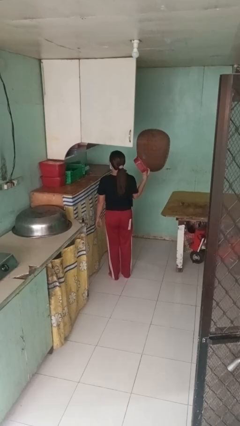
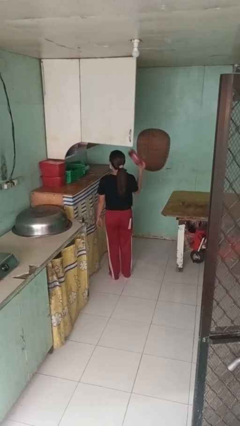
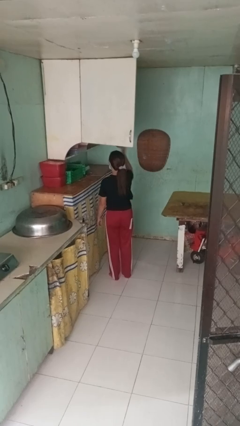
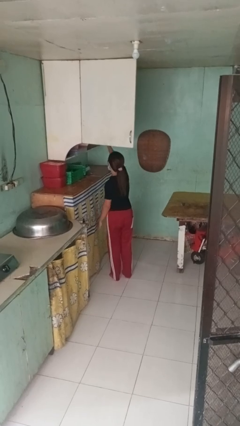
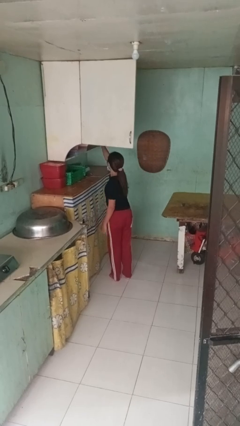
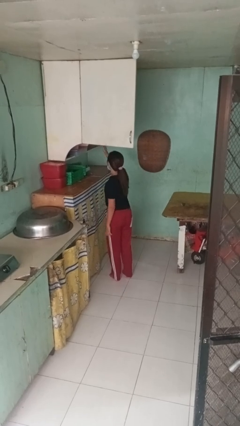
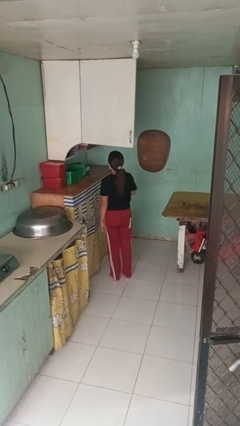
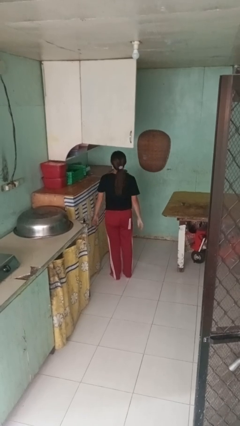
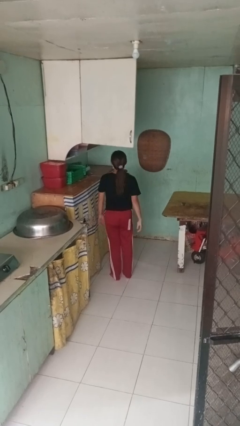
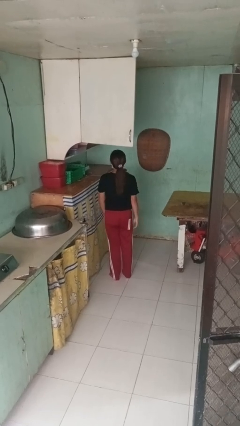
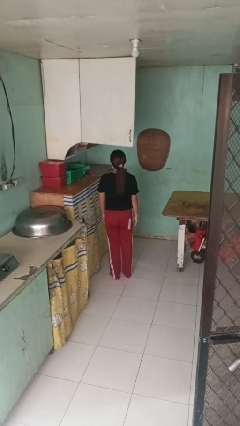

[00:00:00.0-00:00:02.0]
person puts object in cabinet

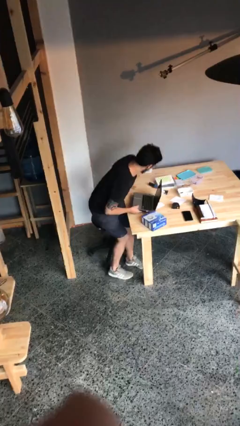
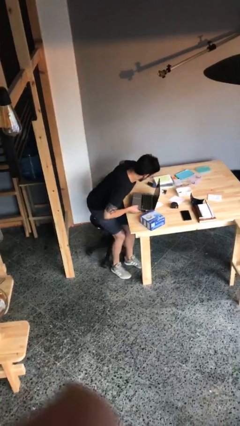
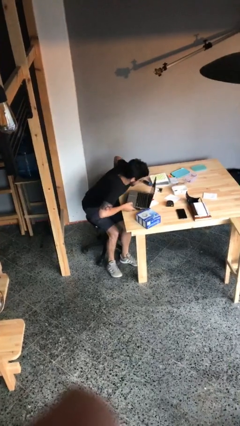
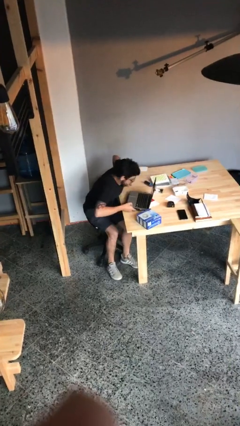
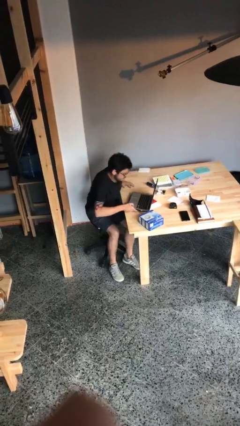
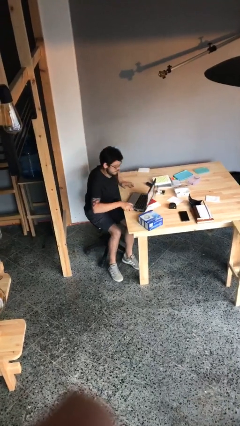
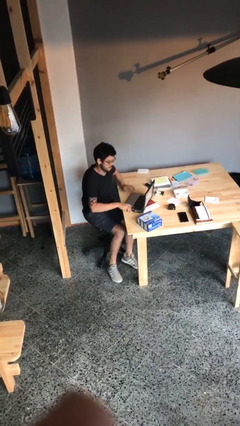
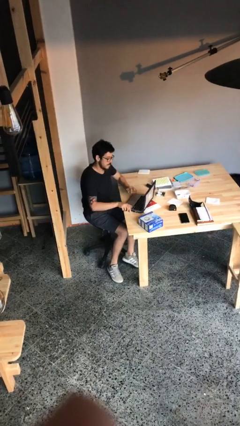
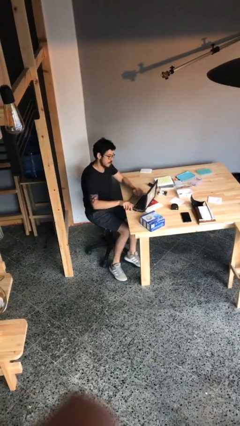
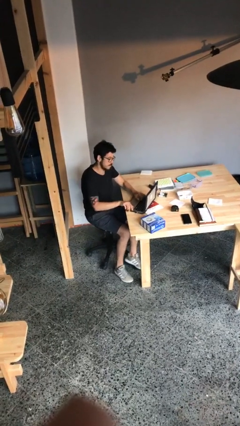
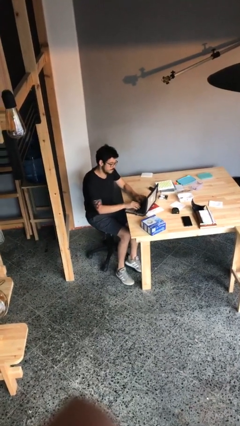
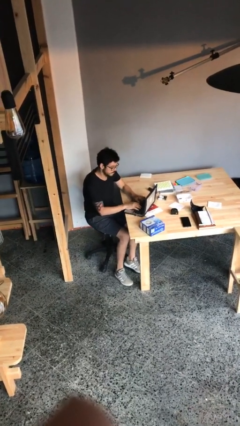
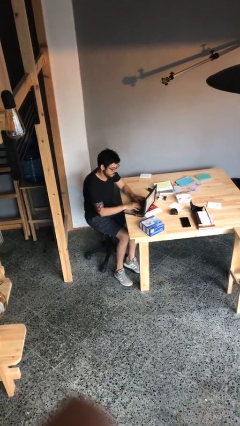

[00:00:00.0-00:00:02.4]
person sits down

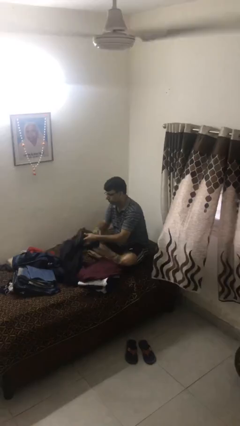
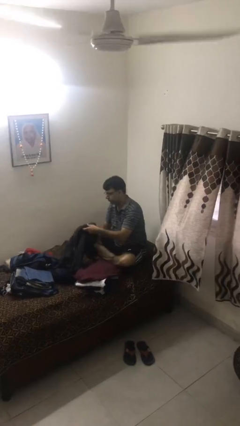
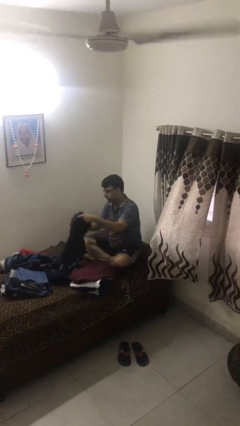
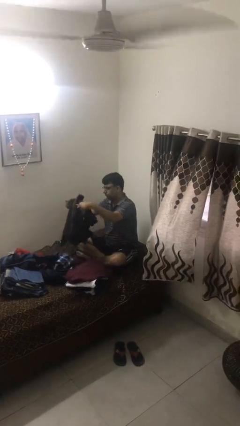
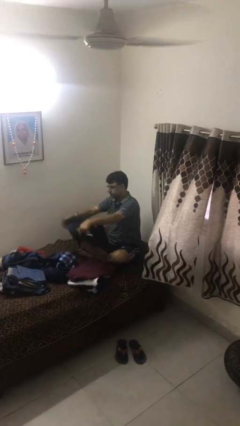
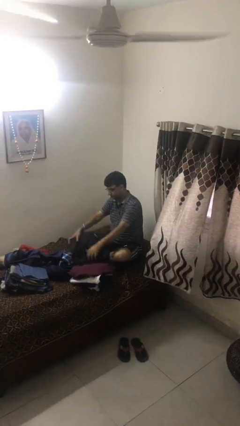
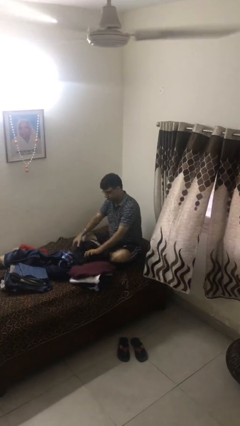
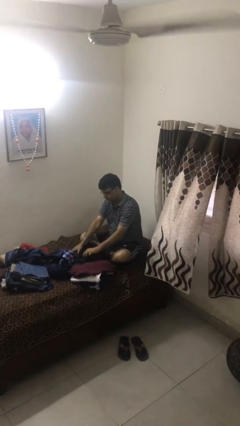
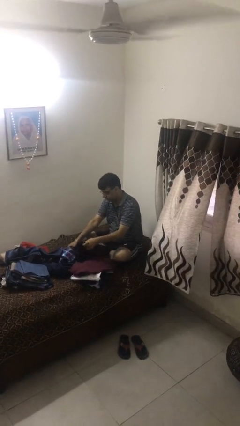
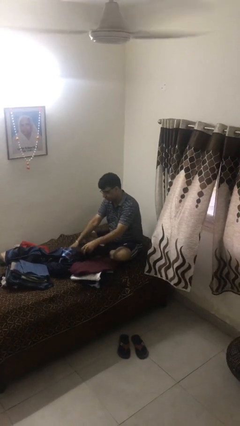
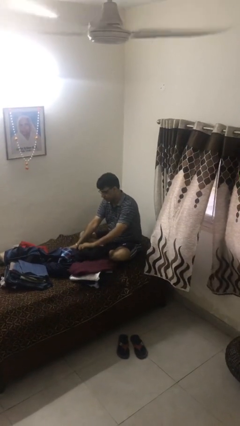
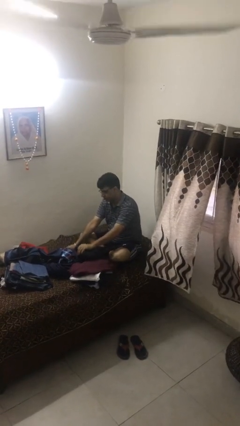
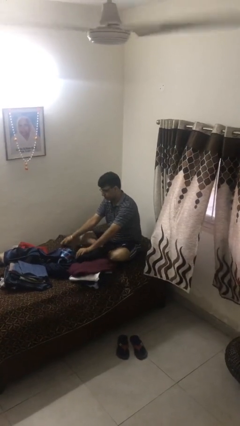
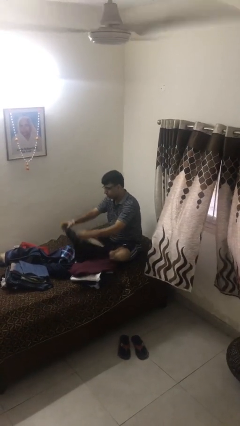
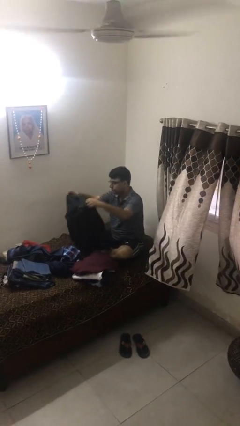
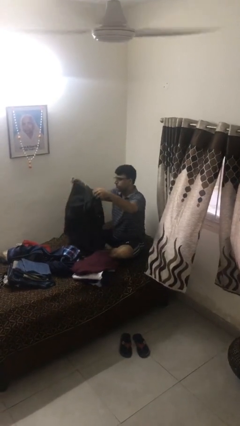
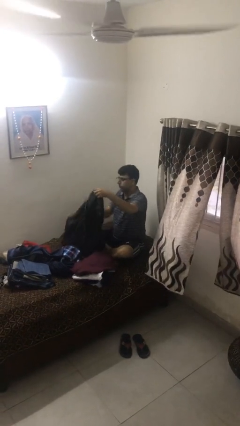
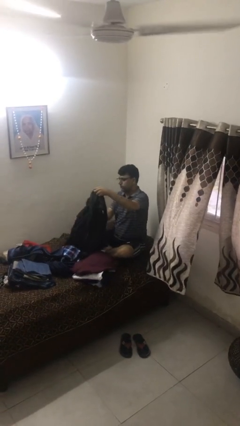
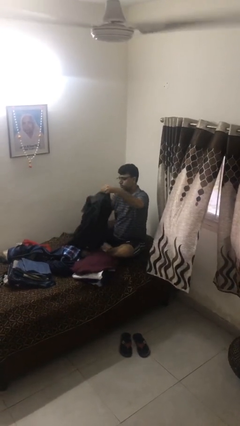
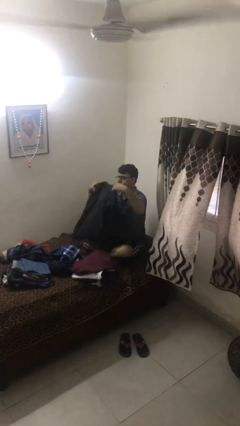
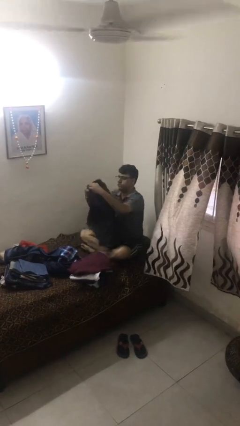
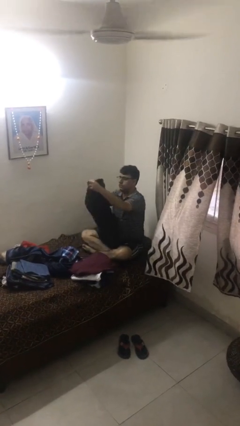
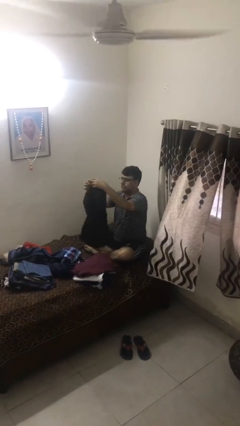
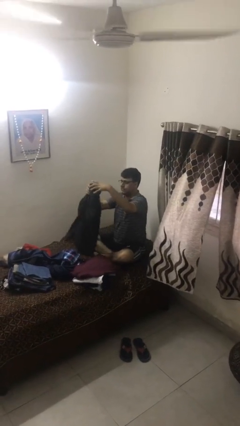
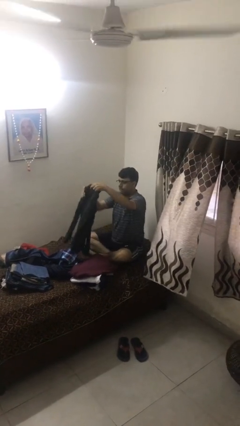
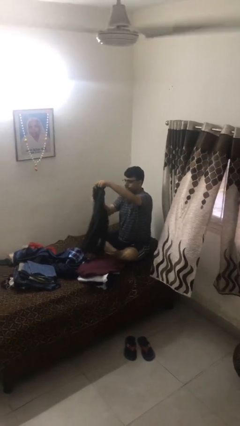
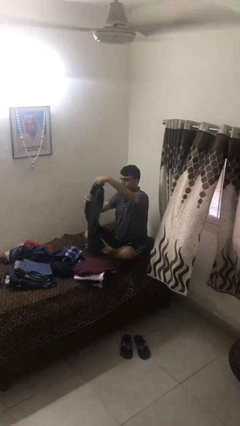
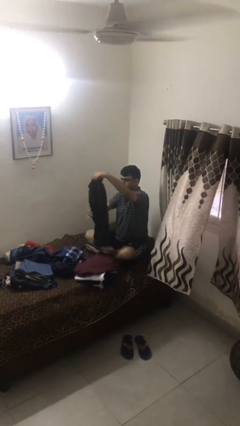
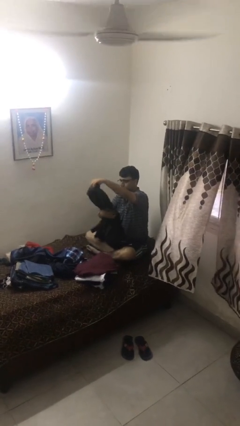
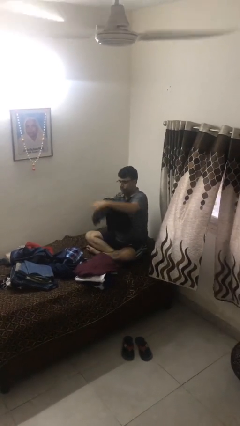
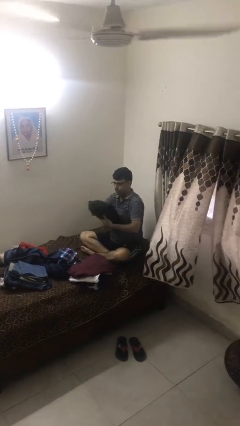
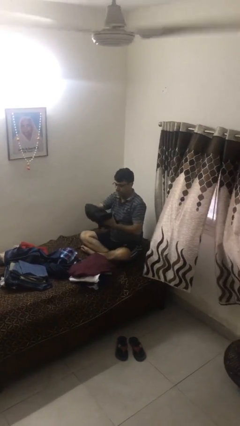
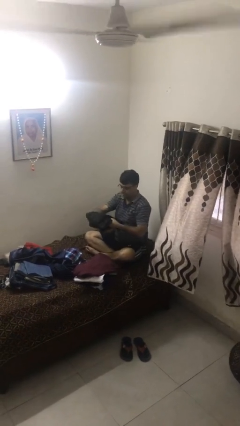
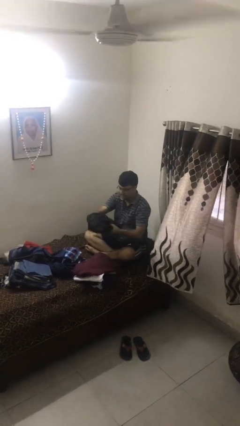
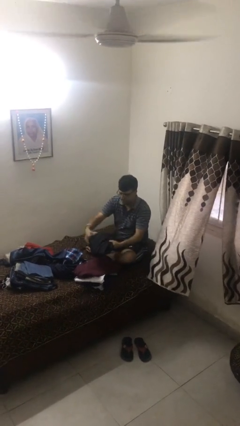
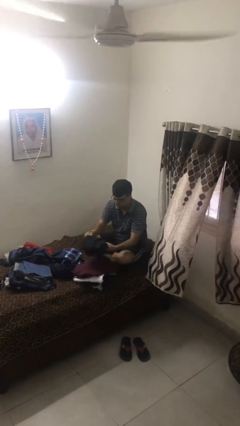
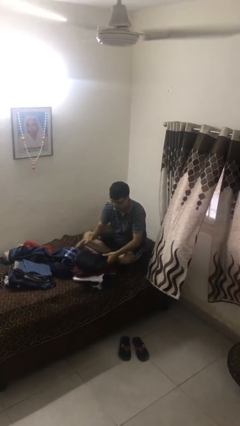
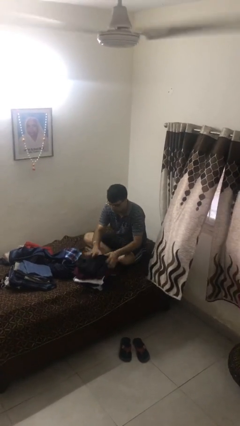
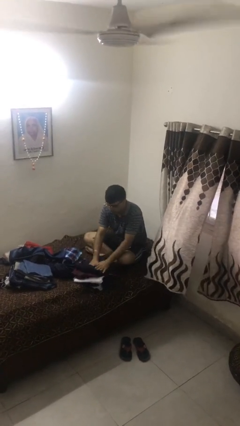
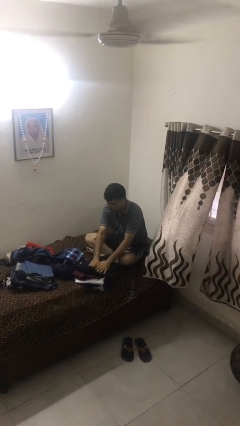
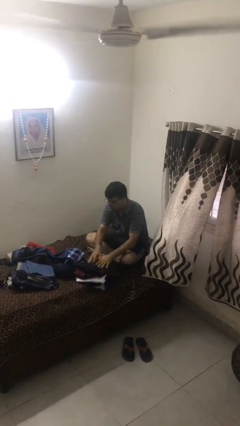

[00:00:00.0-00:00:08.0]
person folds shirt

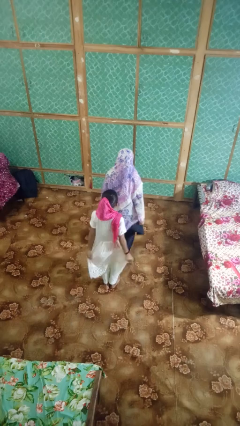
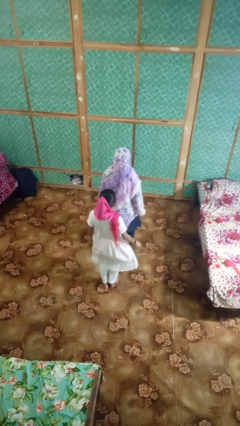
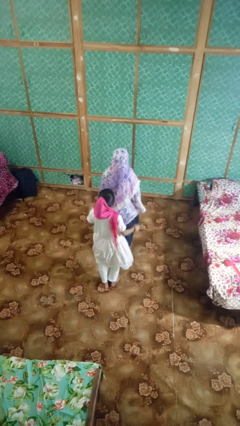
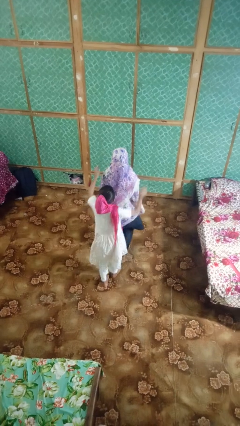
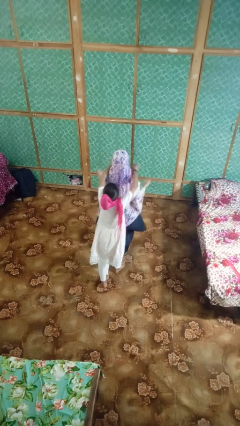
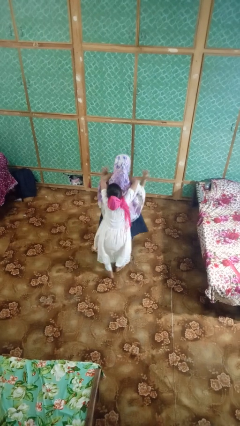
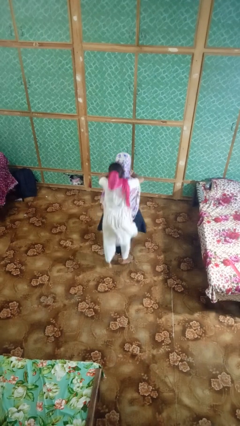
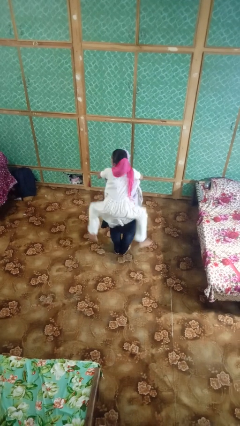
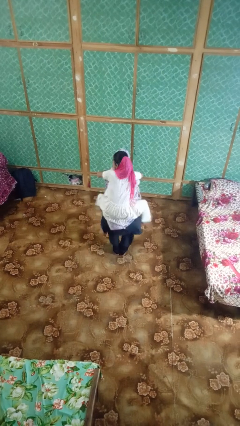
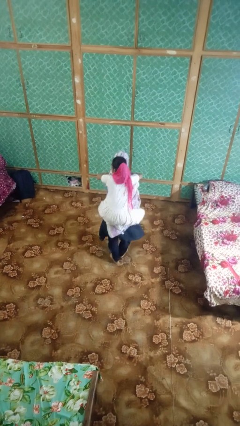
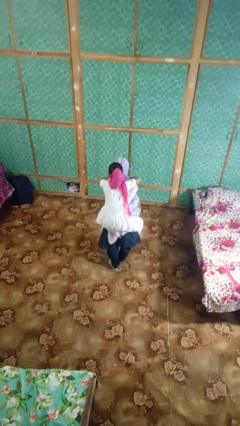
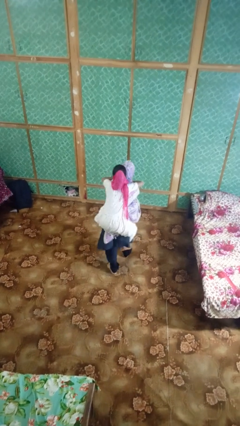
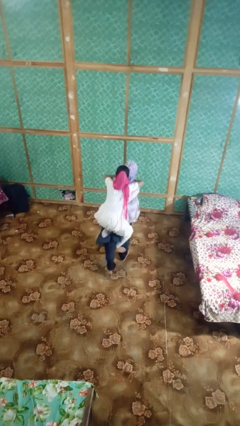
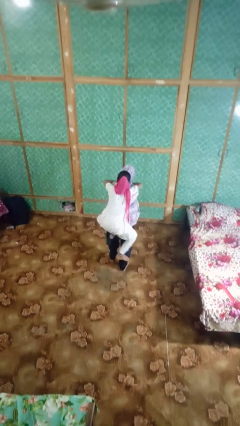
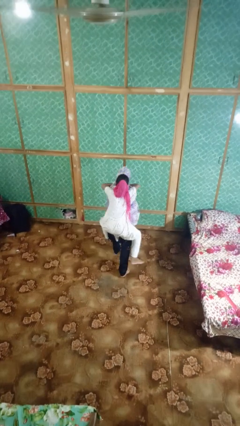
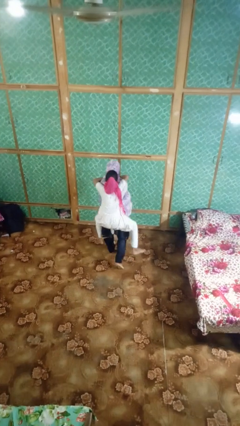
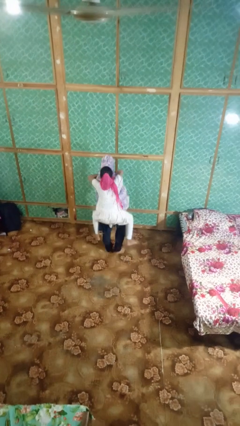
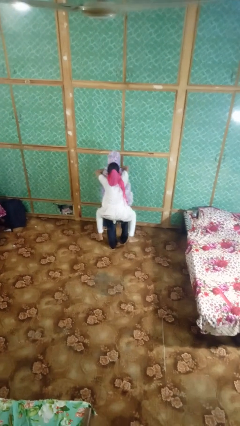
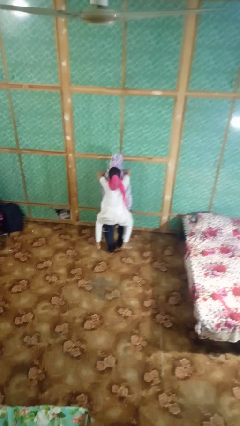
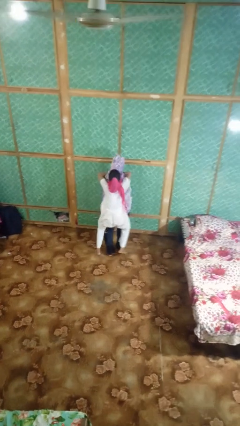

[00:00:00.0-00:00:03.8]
person carries person on back

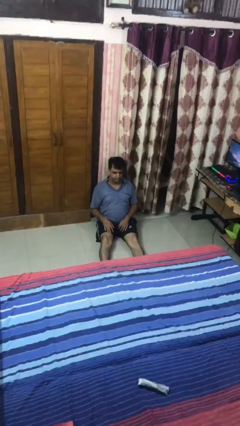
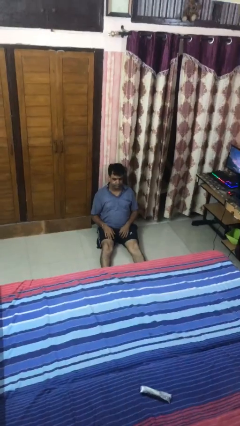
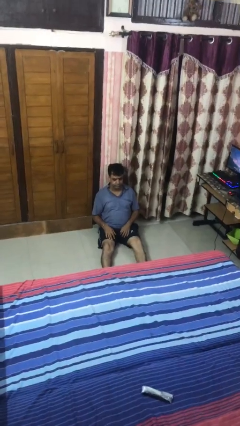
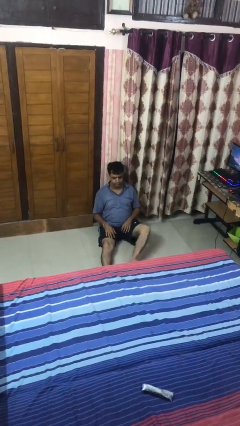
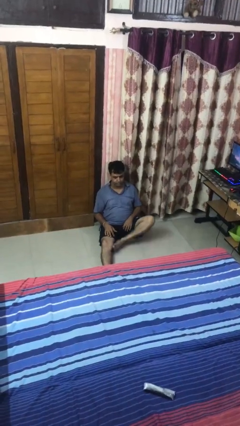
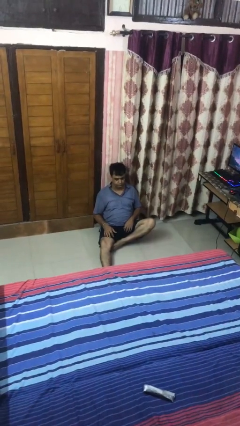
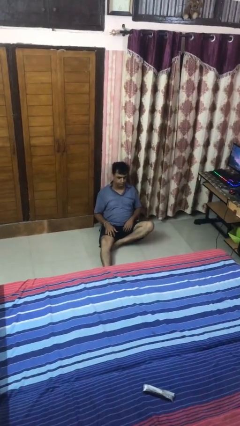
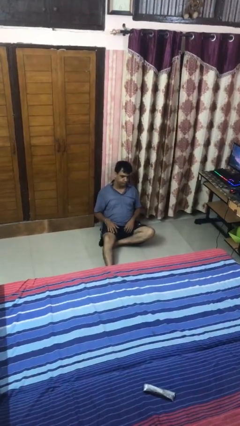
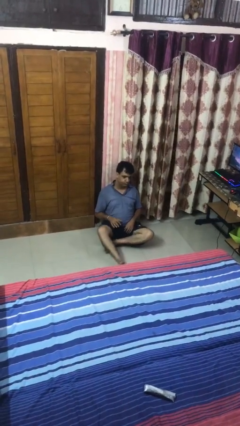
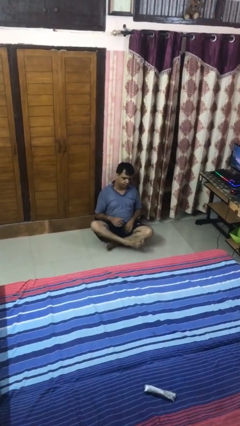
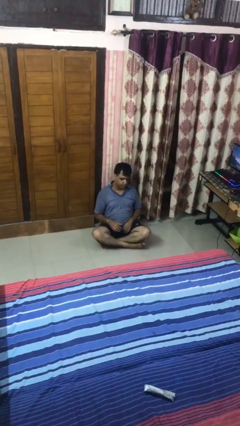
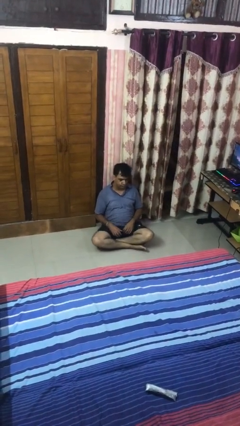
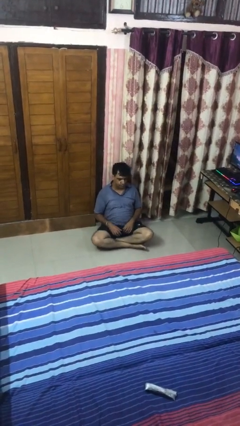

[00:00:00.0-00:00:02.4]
person crosses legs
